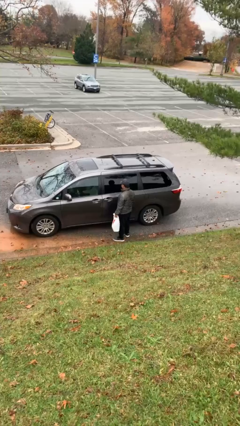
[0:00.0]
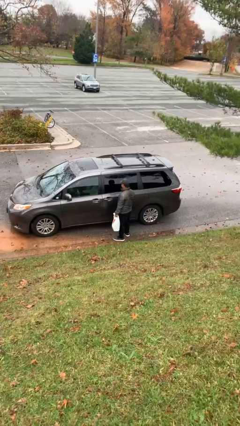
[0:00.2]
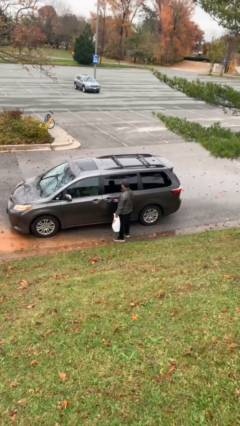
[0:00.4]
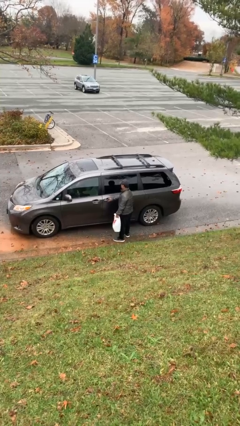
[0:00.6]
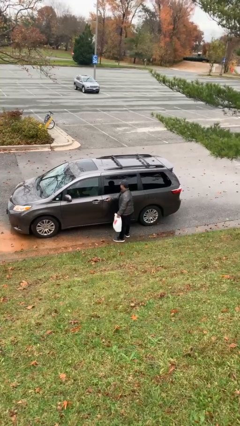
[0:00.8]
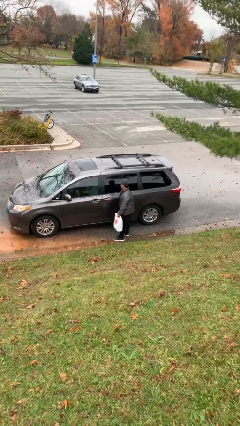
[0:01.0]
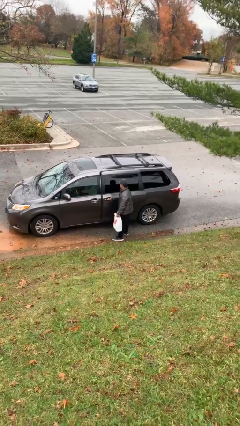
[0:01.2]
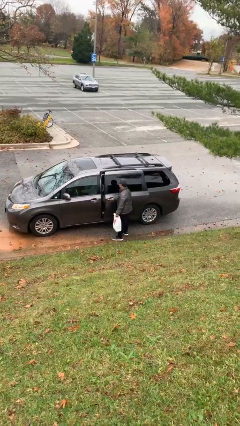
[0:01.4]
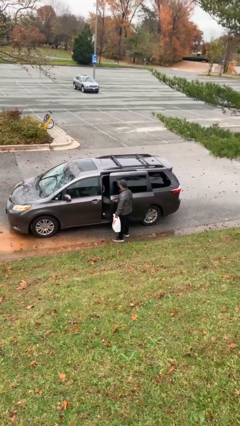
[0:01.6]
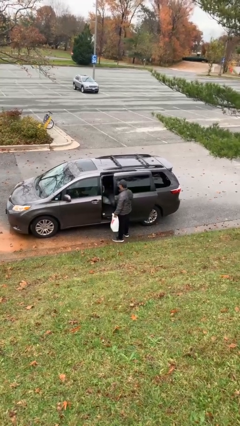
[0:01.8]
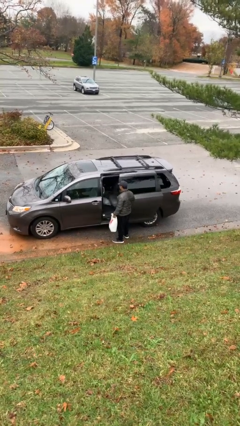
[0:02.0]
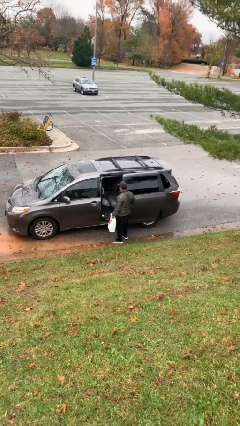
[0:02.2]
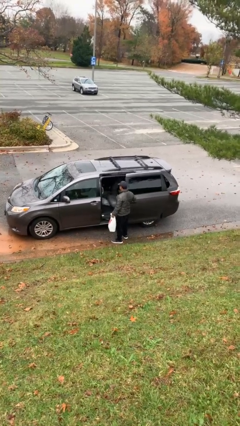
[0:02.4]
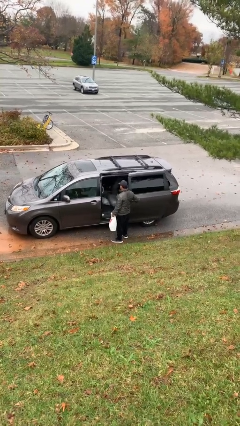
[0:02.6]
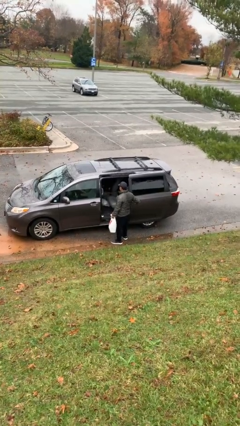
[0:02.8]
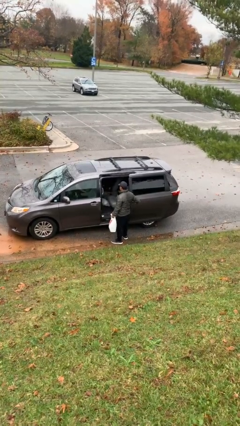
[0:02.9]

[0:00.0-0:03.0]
person opens car door

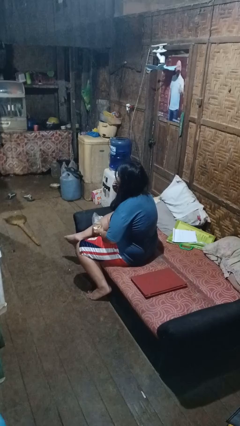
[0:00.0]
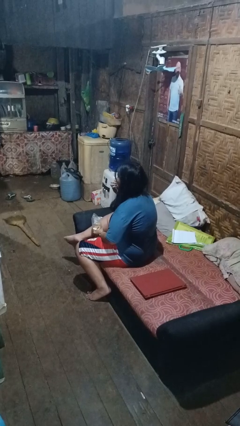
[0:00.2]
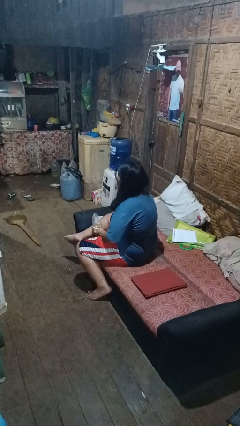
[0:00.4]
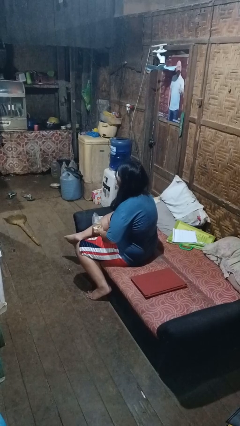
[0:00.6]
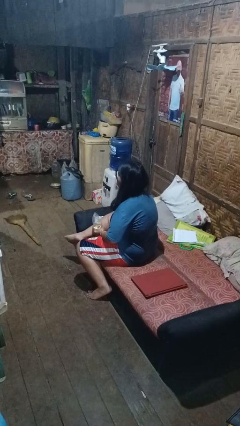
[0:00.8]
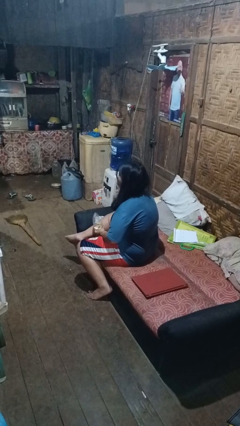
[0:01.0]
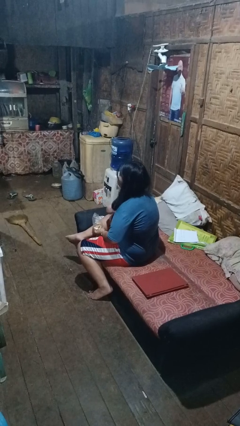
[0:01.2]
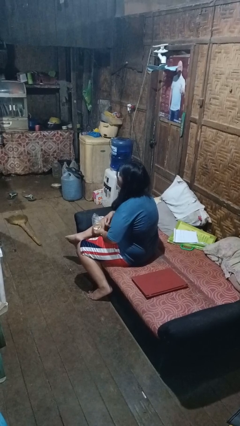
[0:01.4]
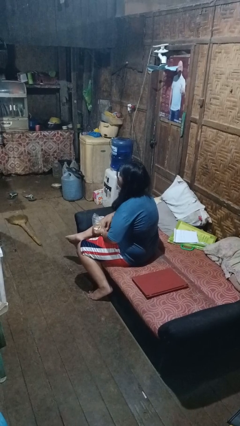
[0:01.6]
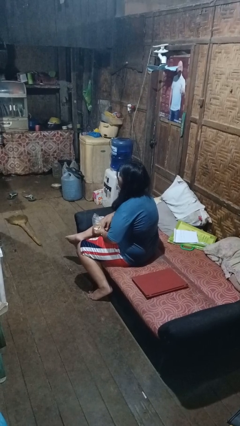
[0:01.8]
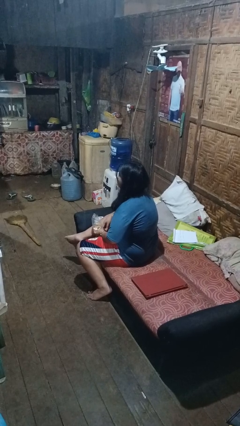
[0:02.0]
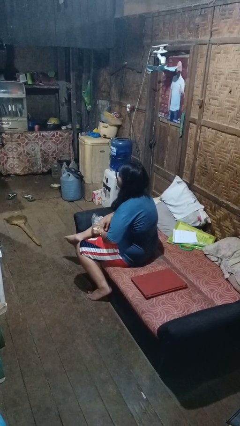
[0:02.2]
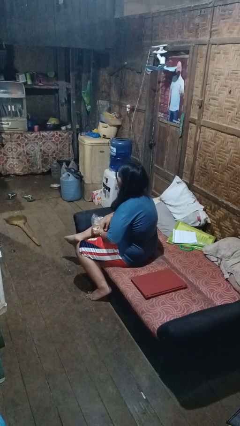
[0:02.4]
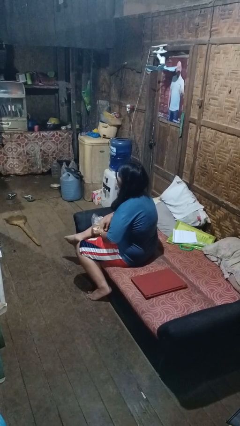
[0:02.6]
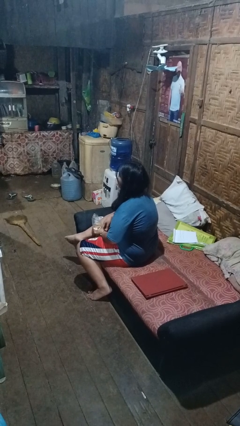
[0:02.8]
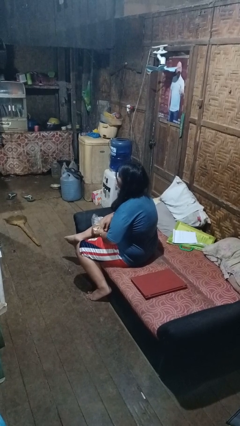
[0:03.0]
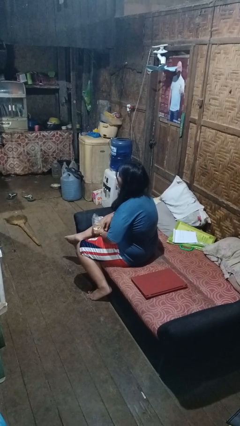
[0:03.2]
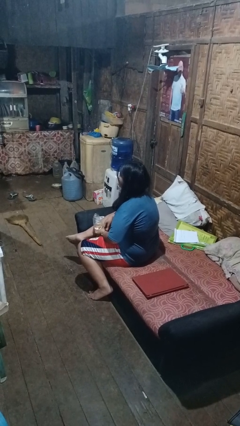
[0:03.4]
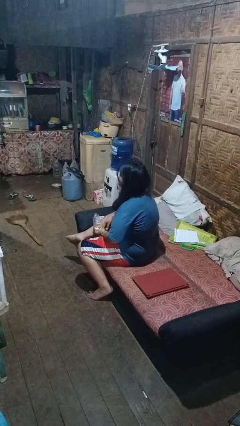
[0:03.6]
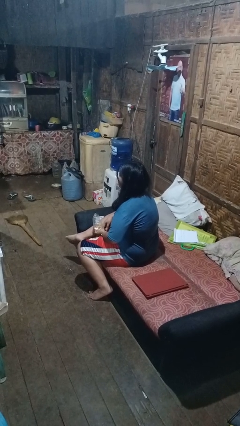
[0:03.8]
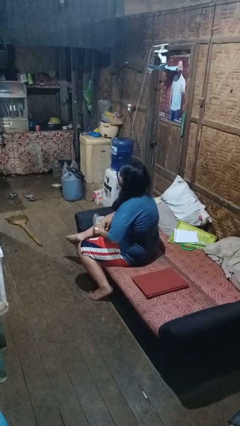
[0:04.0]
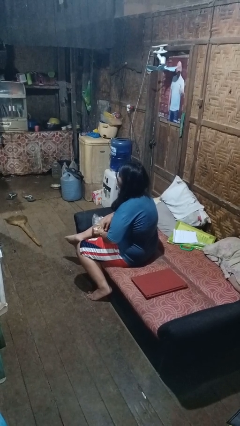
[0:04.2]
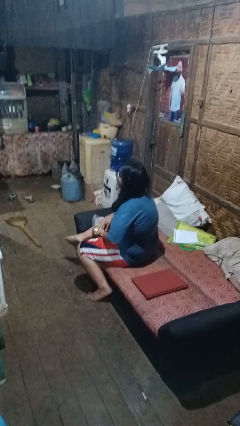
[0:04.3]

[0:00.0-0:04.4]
person eats snack from bag

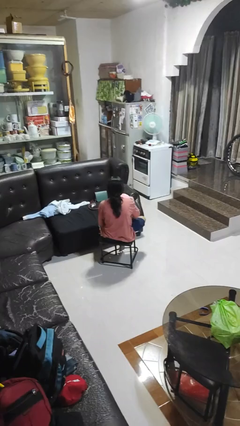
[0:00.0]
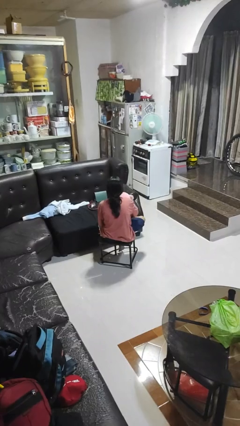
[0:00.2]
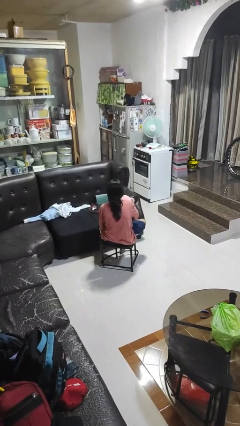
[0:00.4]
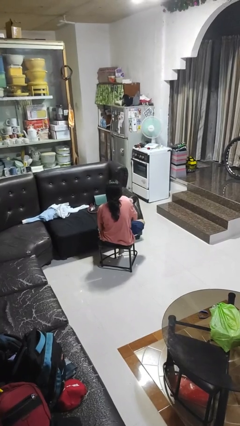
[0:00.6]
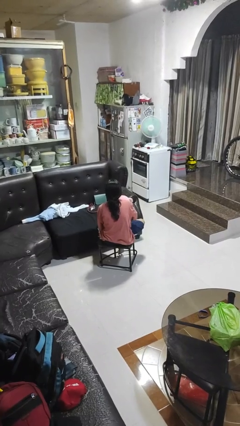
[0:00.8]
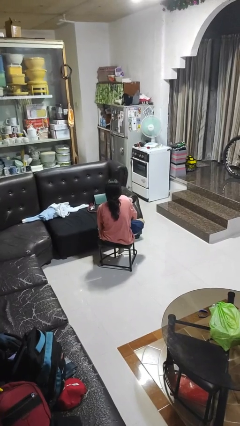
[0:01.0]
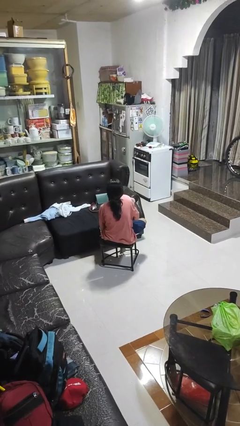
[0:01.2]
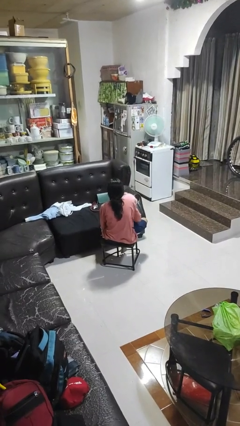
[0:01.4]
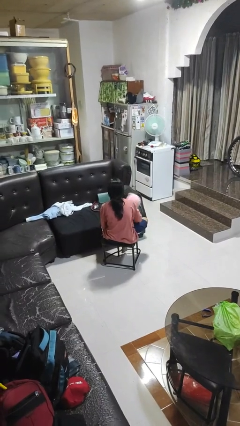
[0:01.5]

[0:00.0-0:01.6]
person hugs stuffed animal

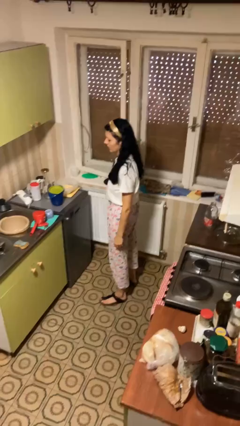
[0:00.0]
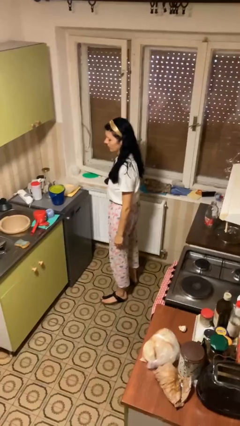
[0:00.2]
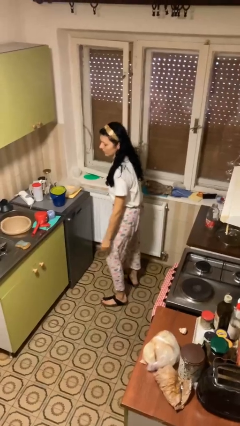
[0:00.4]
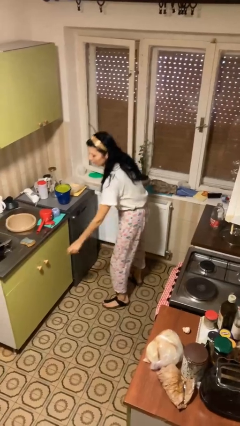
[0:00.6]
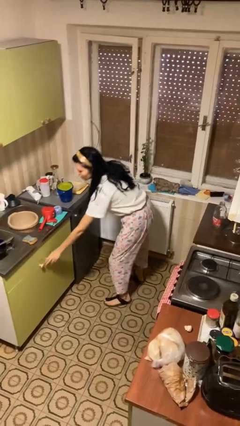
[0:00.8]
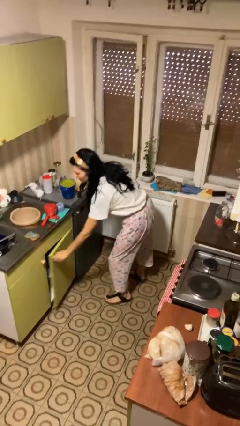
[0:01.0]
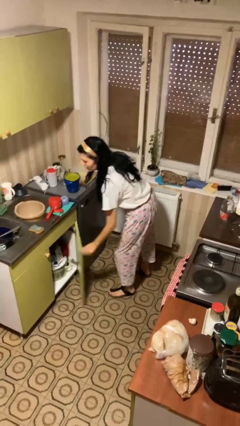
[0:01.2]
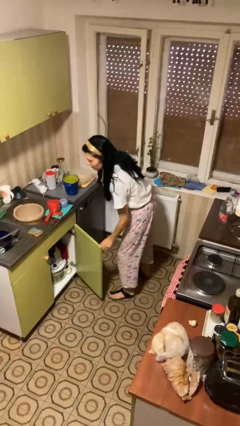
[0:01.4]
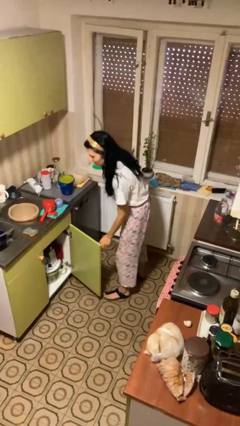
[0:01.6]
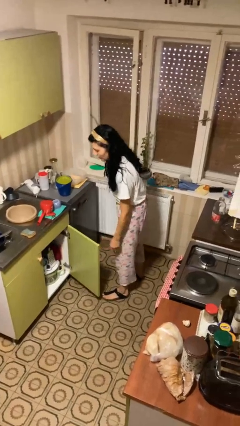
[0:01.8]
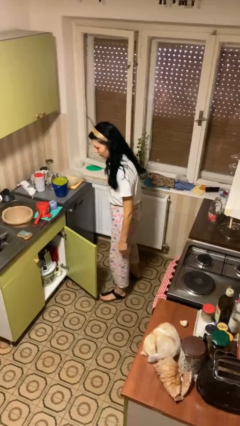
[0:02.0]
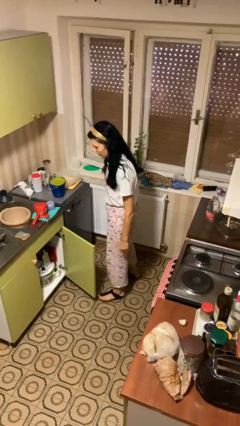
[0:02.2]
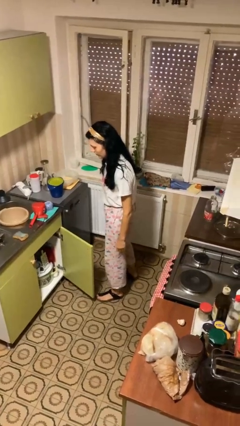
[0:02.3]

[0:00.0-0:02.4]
person opens cabinet

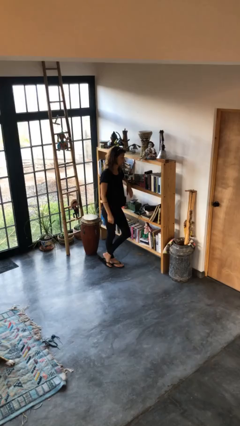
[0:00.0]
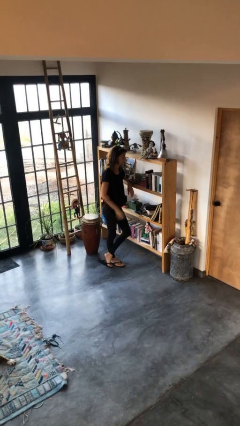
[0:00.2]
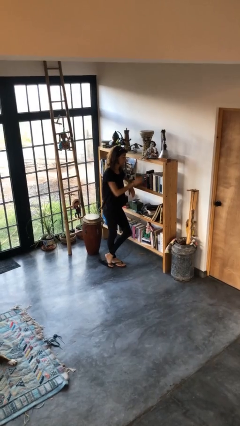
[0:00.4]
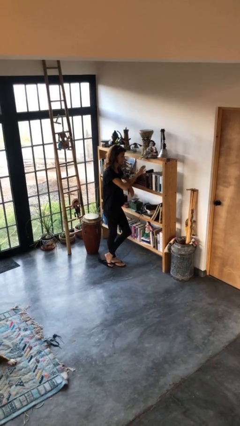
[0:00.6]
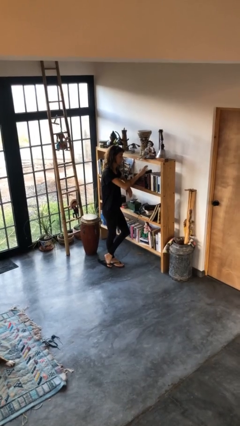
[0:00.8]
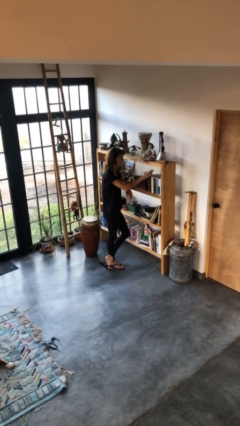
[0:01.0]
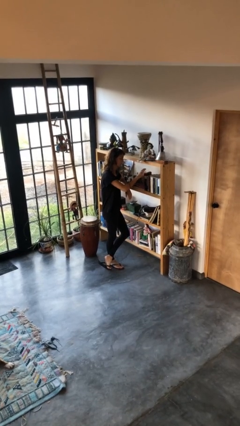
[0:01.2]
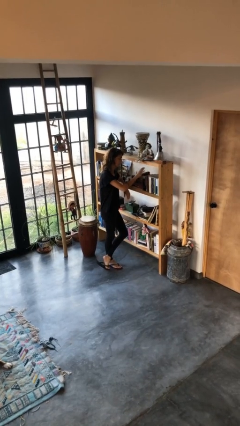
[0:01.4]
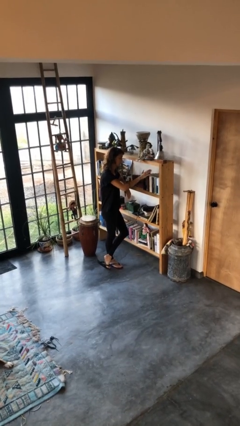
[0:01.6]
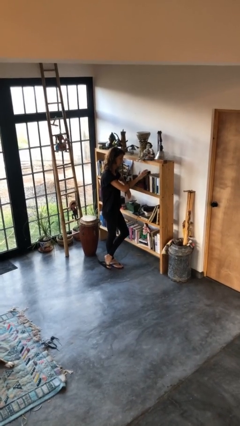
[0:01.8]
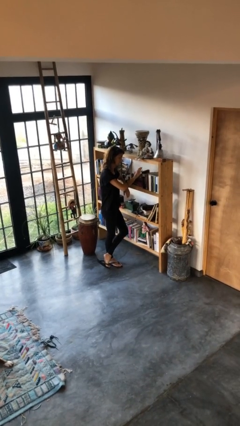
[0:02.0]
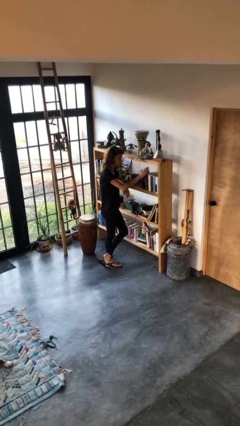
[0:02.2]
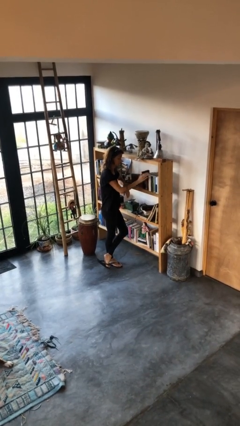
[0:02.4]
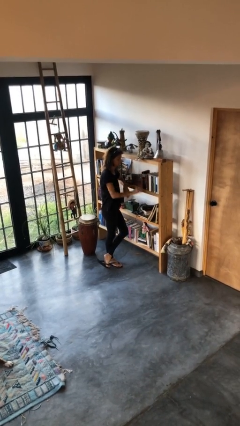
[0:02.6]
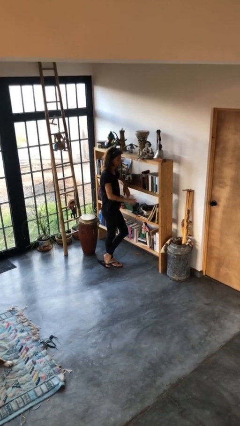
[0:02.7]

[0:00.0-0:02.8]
person waves hand over object

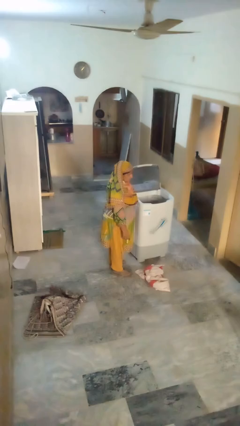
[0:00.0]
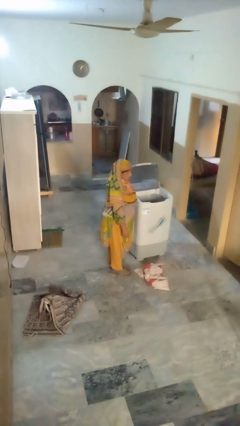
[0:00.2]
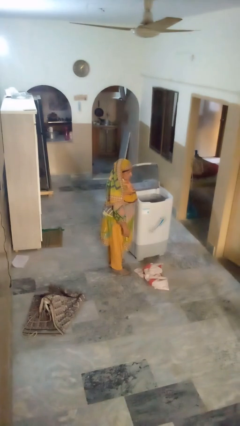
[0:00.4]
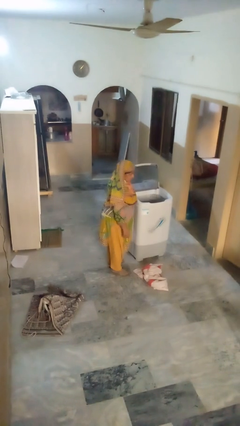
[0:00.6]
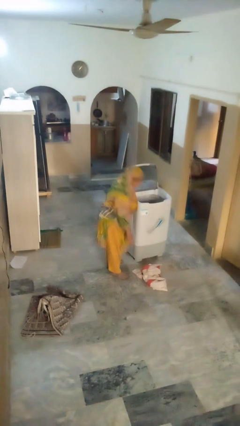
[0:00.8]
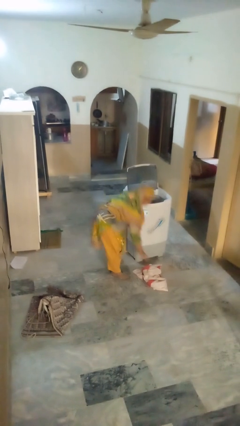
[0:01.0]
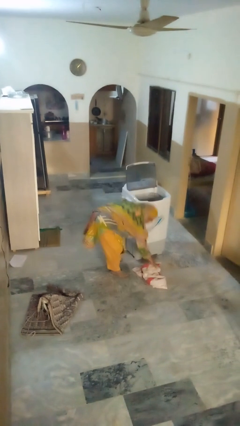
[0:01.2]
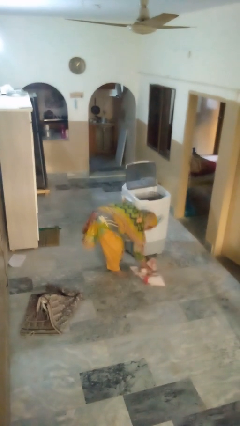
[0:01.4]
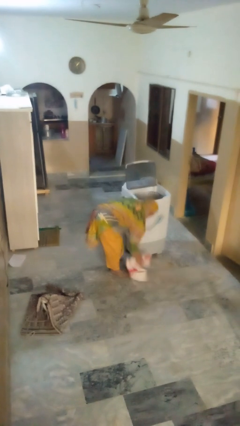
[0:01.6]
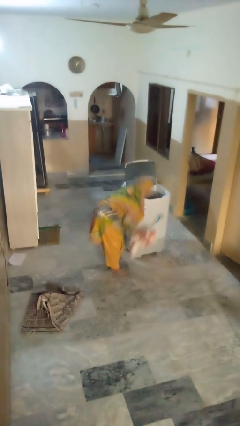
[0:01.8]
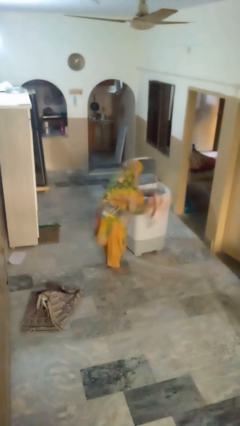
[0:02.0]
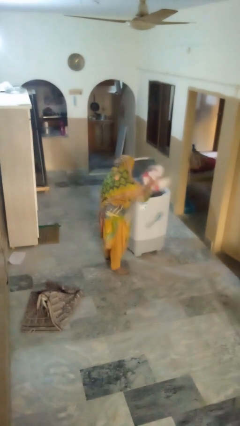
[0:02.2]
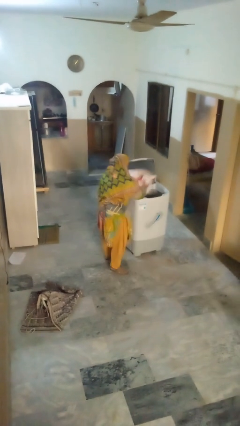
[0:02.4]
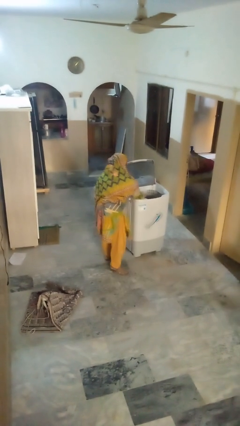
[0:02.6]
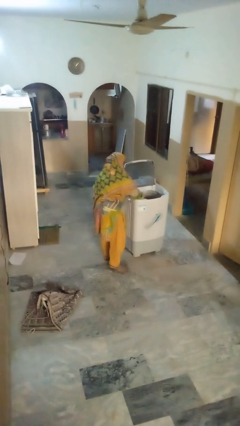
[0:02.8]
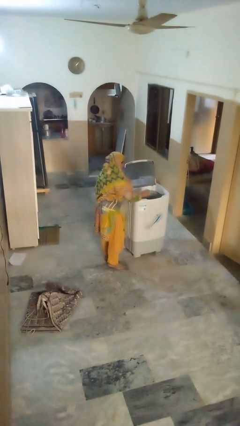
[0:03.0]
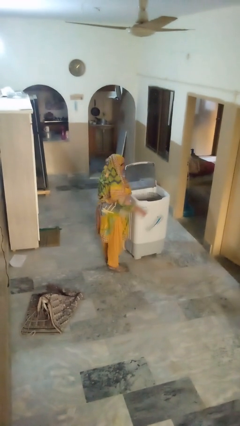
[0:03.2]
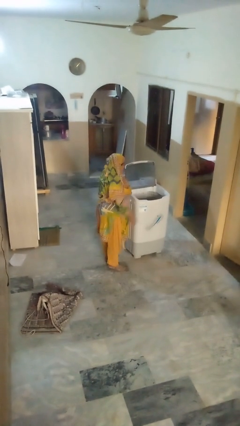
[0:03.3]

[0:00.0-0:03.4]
person loads clotheswasher
